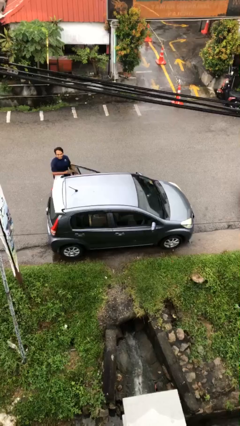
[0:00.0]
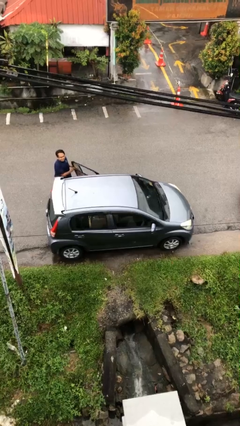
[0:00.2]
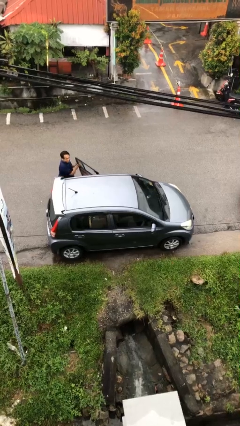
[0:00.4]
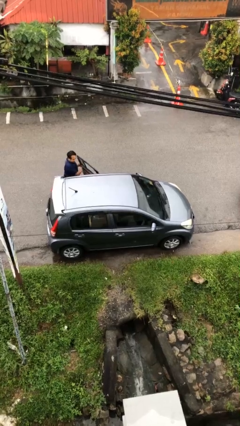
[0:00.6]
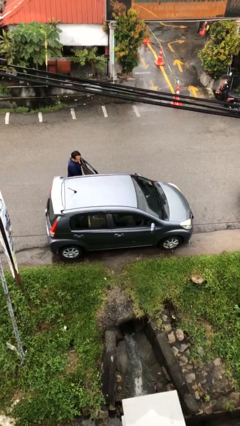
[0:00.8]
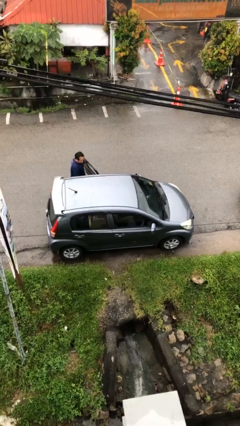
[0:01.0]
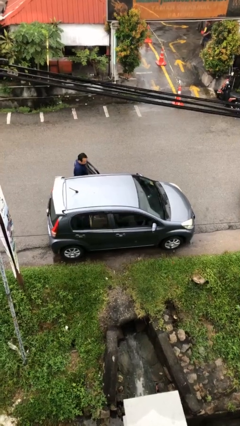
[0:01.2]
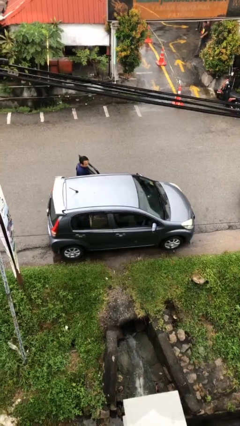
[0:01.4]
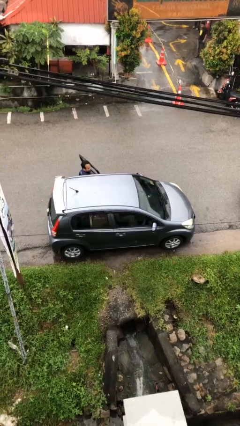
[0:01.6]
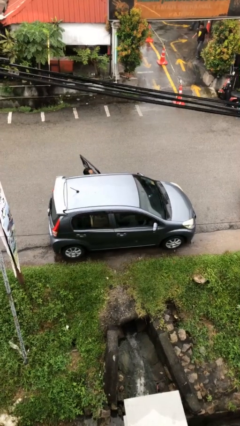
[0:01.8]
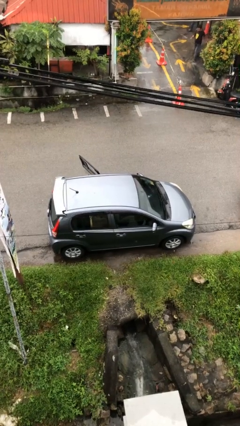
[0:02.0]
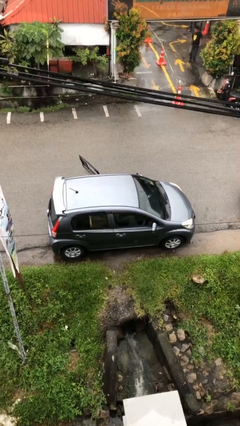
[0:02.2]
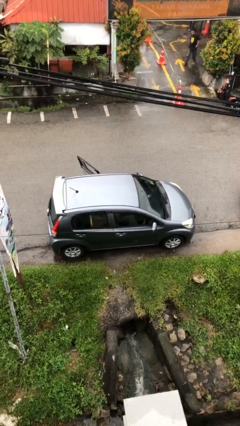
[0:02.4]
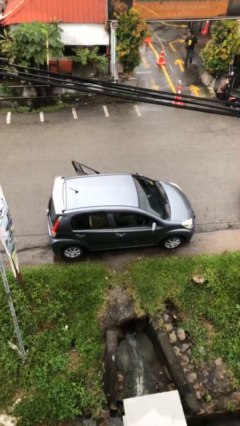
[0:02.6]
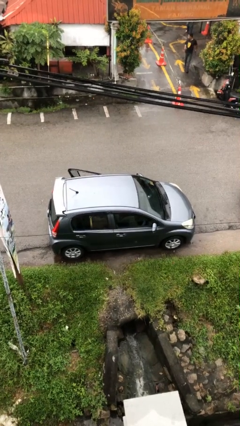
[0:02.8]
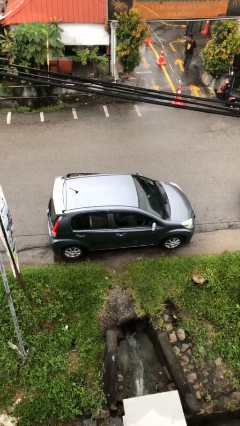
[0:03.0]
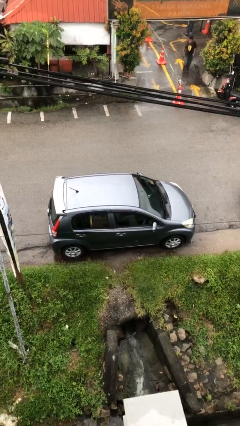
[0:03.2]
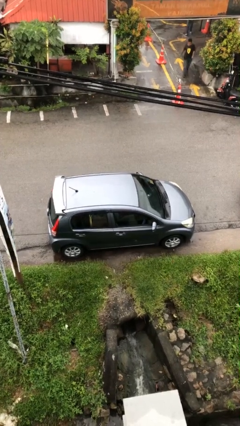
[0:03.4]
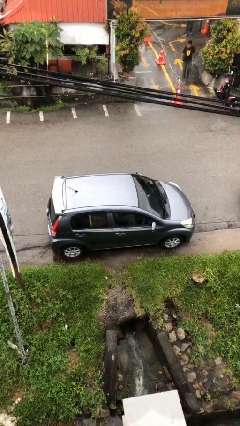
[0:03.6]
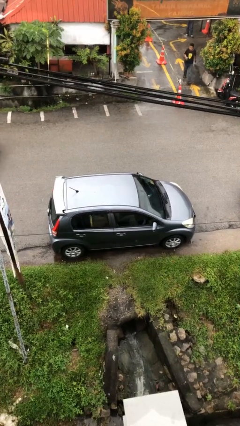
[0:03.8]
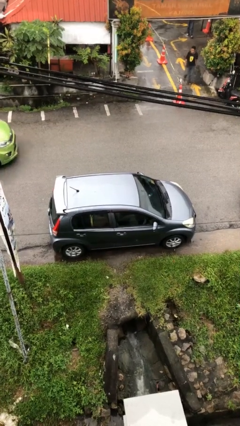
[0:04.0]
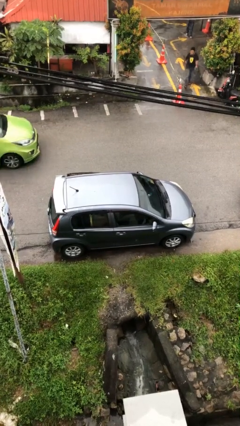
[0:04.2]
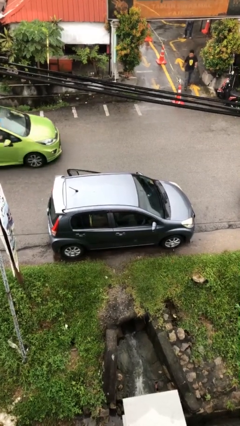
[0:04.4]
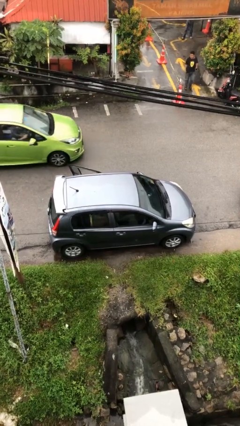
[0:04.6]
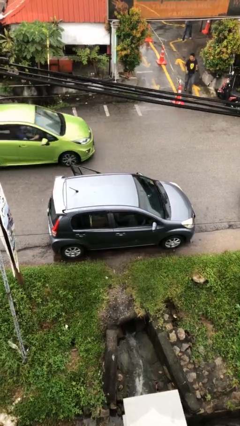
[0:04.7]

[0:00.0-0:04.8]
car picks up person

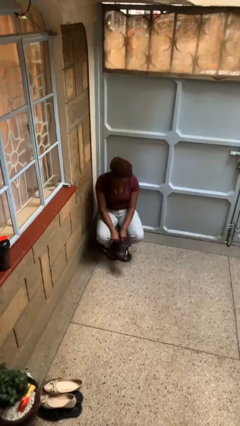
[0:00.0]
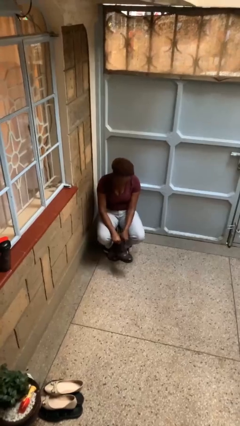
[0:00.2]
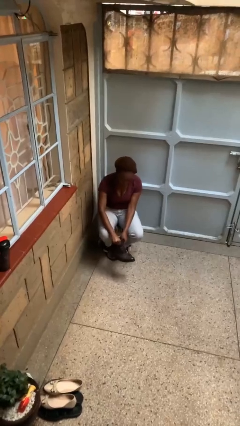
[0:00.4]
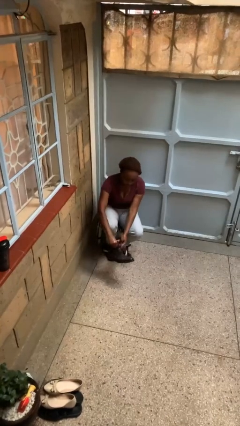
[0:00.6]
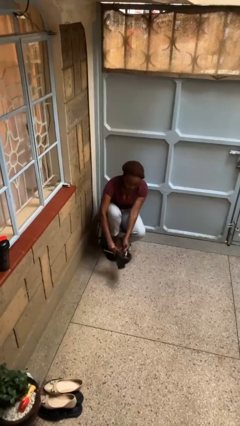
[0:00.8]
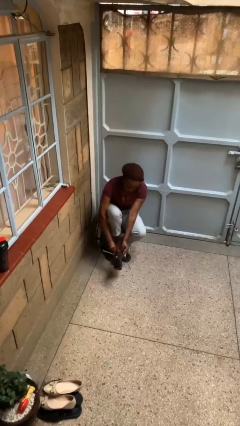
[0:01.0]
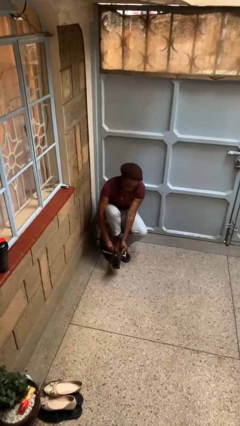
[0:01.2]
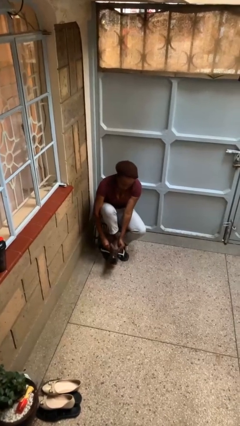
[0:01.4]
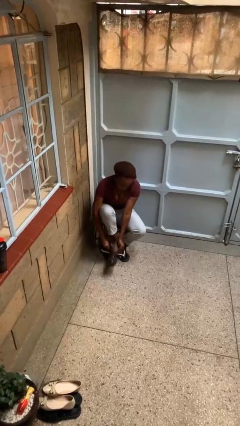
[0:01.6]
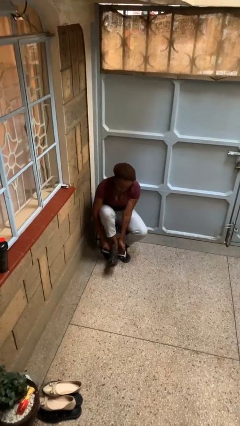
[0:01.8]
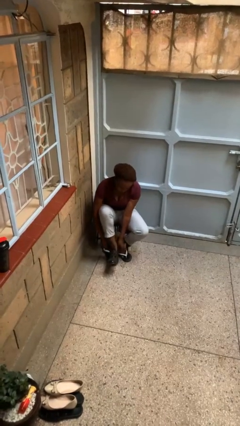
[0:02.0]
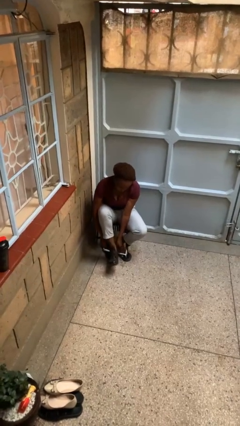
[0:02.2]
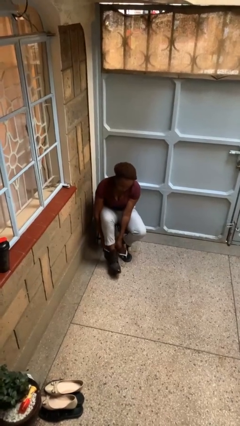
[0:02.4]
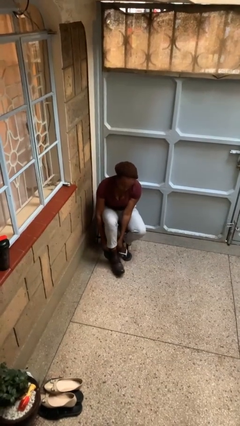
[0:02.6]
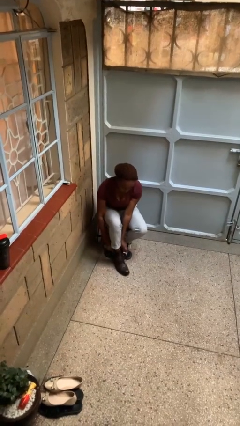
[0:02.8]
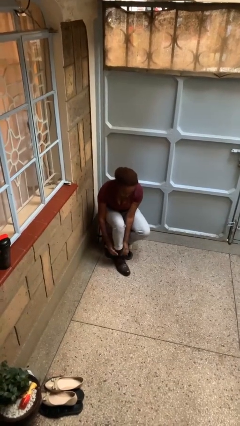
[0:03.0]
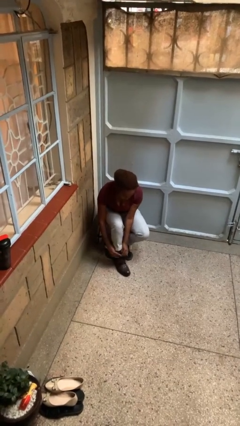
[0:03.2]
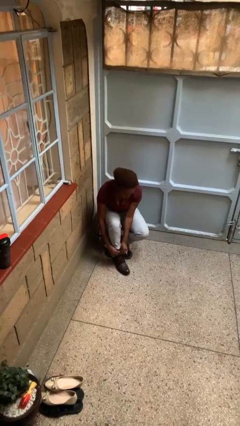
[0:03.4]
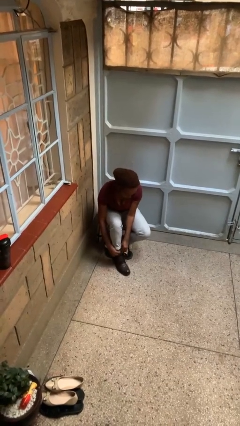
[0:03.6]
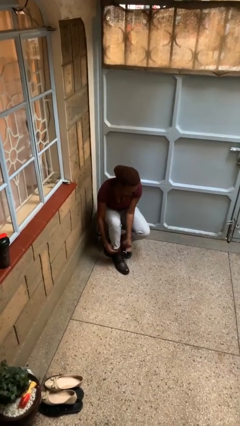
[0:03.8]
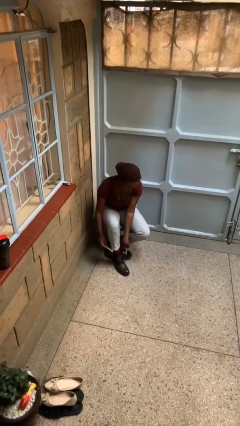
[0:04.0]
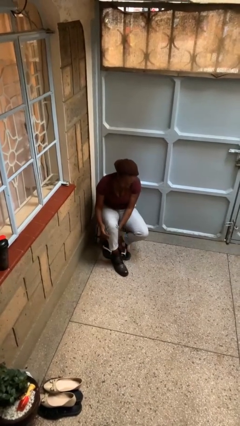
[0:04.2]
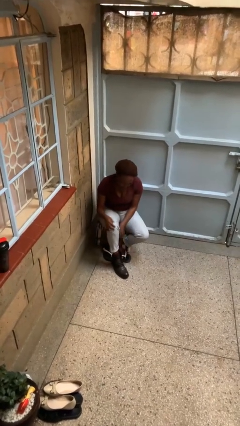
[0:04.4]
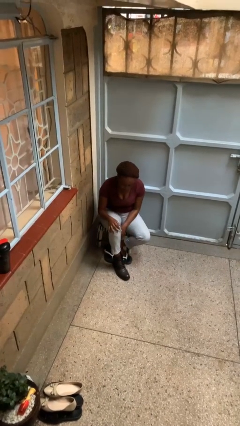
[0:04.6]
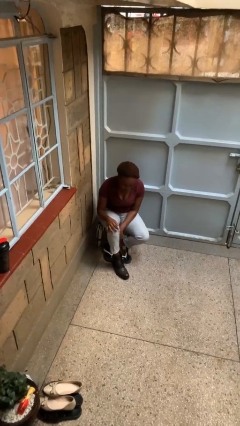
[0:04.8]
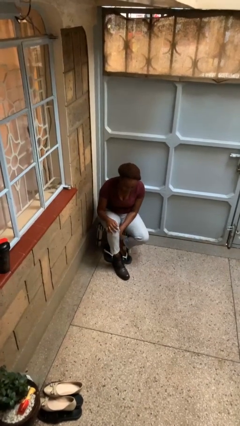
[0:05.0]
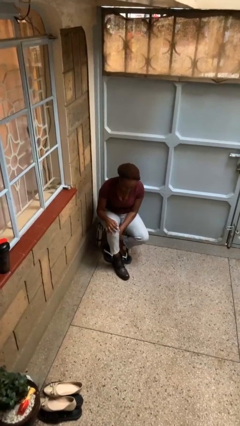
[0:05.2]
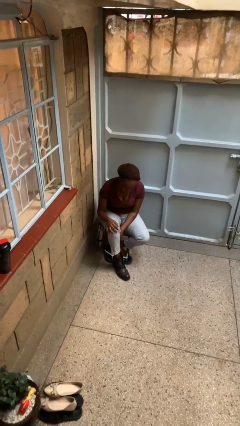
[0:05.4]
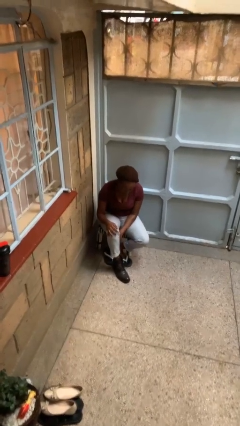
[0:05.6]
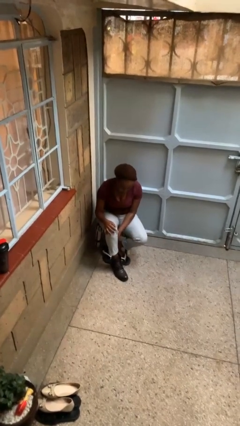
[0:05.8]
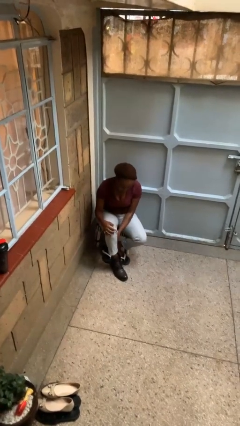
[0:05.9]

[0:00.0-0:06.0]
person puts on boots

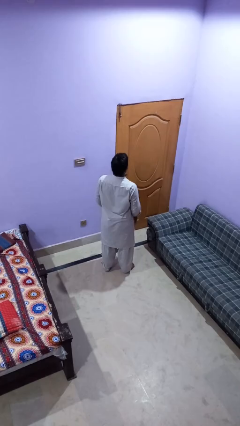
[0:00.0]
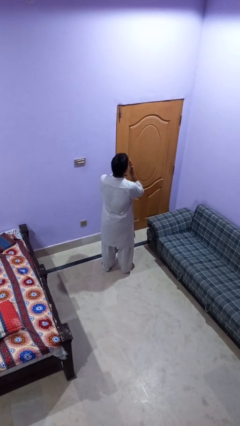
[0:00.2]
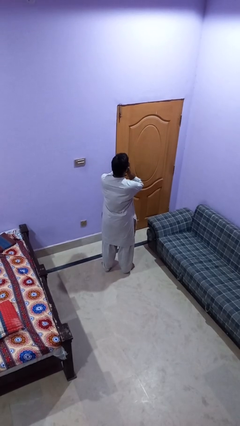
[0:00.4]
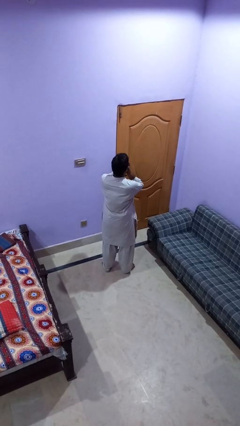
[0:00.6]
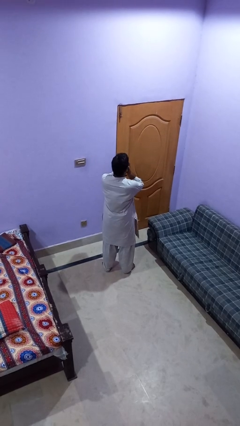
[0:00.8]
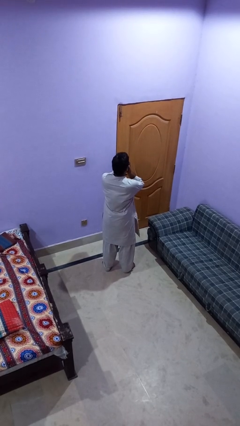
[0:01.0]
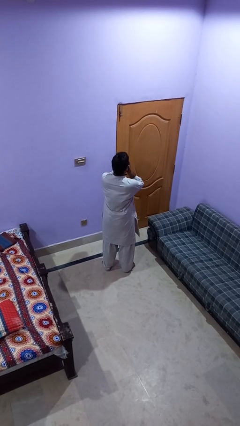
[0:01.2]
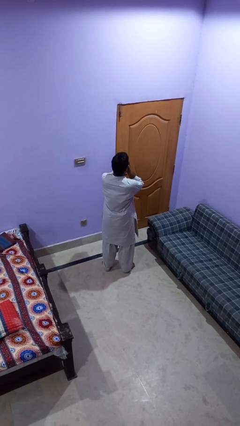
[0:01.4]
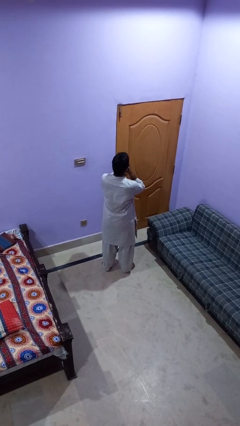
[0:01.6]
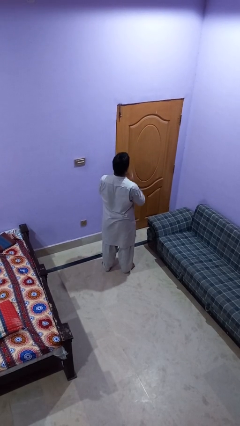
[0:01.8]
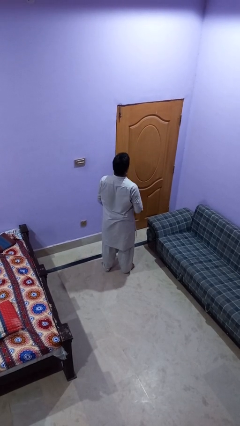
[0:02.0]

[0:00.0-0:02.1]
person covers face with hands

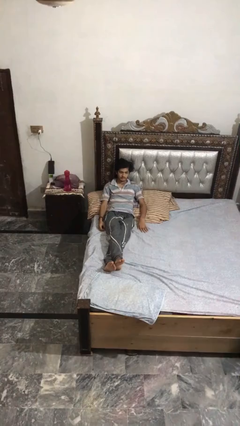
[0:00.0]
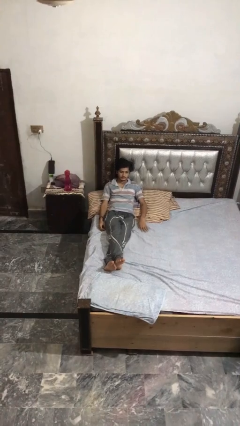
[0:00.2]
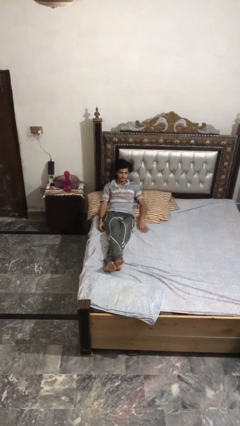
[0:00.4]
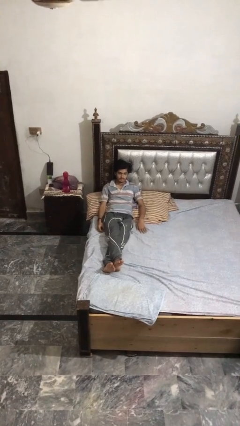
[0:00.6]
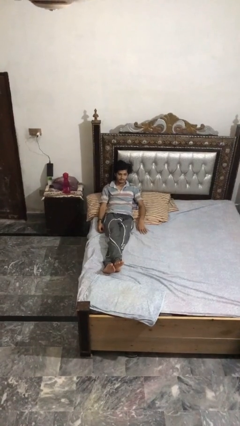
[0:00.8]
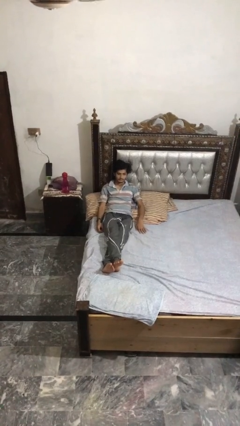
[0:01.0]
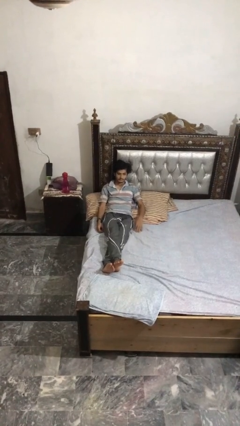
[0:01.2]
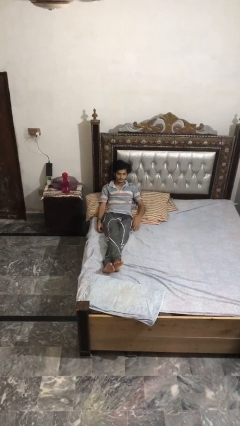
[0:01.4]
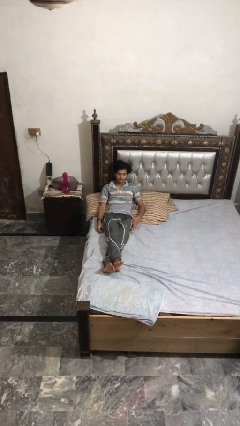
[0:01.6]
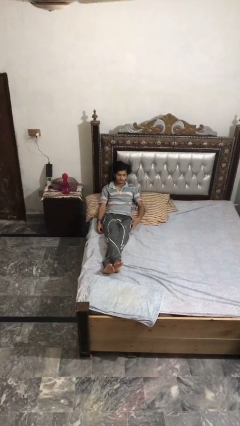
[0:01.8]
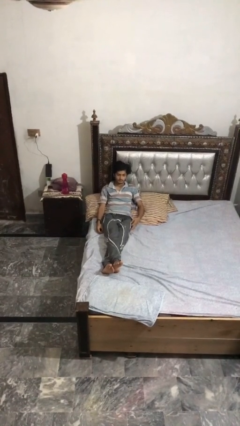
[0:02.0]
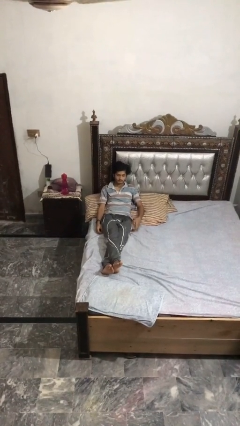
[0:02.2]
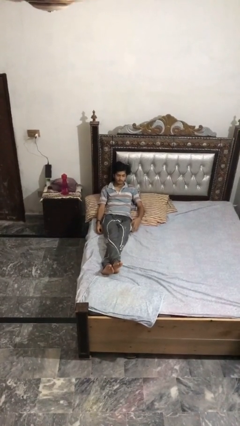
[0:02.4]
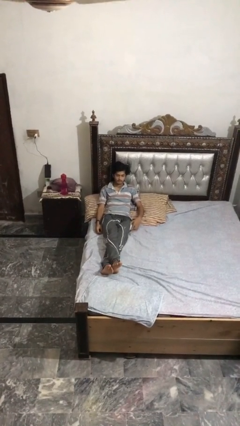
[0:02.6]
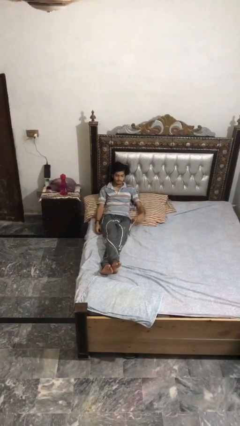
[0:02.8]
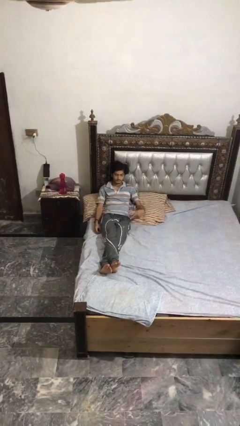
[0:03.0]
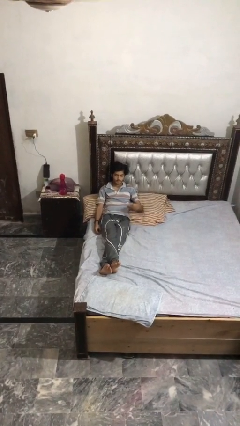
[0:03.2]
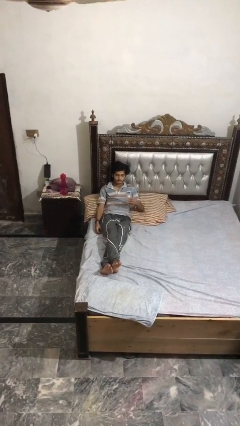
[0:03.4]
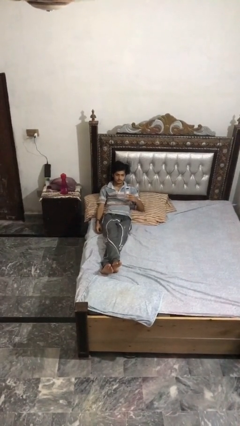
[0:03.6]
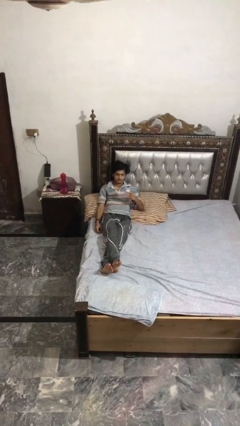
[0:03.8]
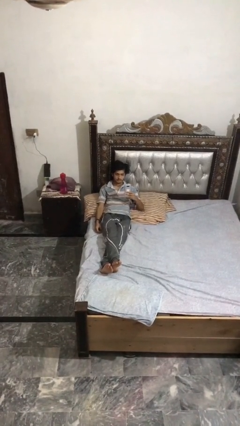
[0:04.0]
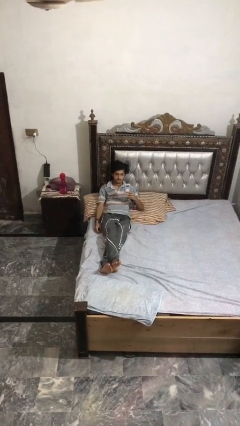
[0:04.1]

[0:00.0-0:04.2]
person takes phone from pocket

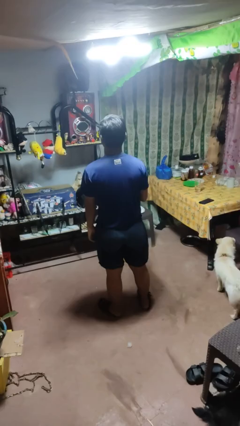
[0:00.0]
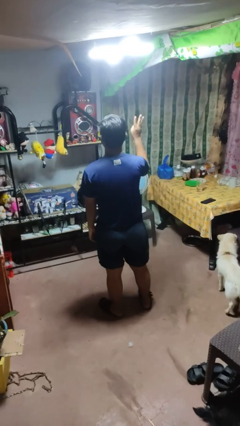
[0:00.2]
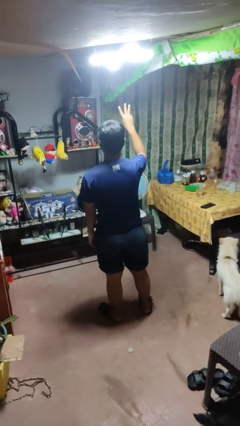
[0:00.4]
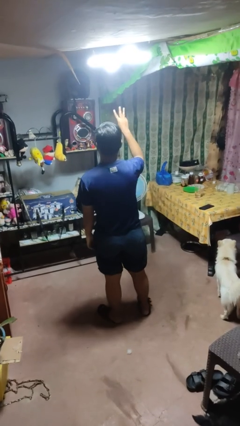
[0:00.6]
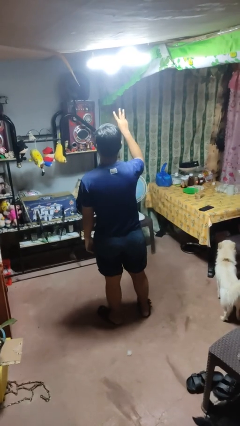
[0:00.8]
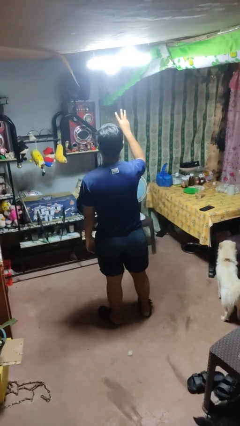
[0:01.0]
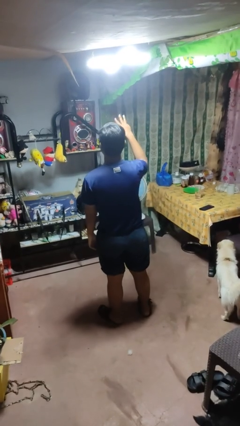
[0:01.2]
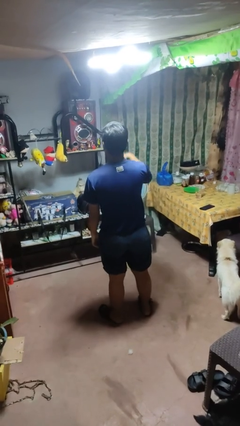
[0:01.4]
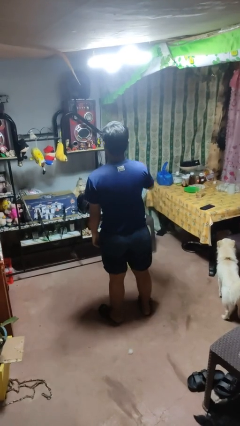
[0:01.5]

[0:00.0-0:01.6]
person gestures number three
